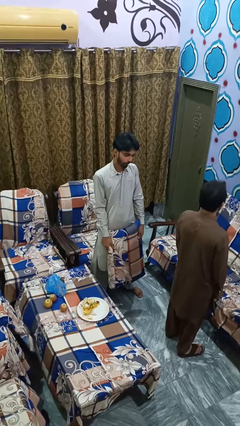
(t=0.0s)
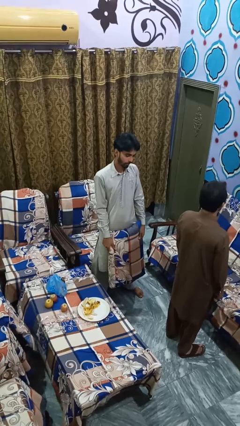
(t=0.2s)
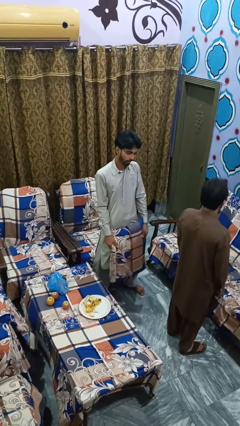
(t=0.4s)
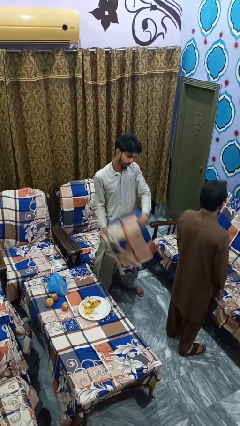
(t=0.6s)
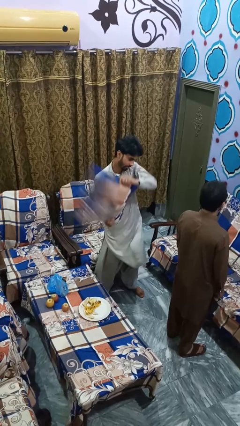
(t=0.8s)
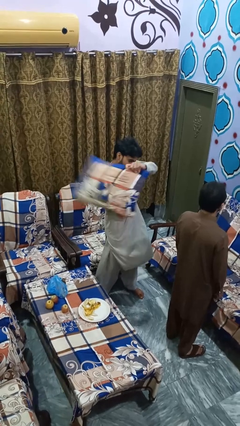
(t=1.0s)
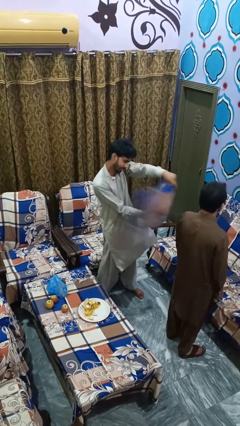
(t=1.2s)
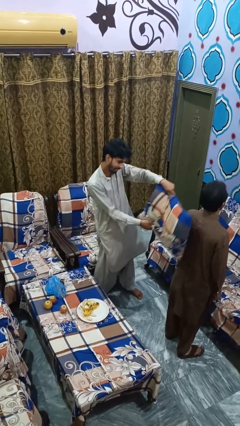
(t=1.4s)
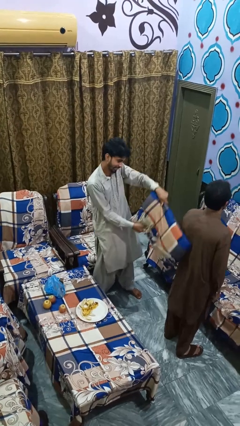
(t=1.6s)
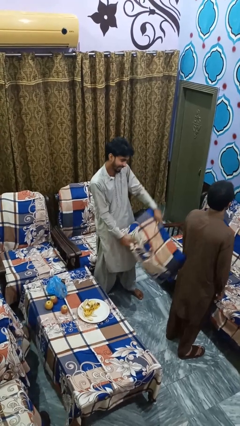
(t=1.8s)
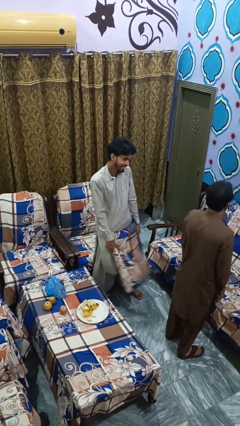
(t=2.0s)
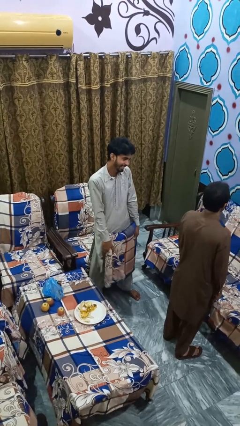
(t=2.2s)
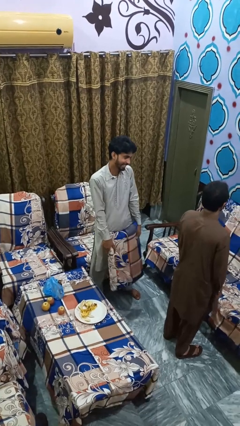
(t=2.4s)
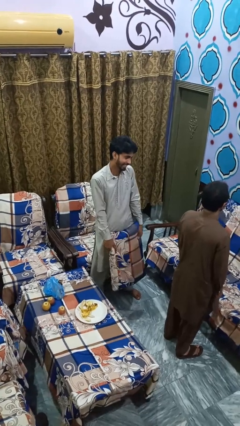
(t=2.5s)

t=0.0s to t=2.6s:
person hits person with pillow

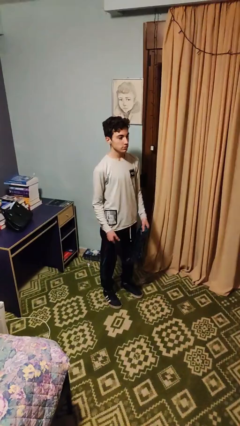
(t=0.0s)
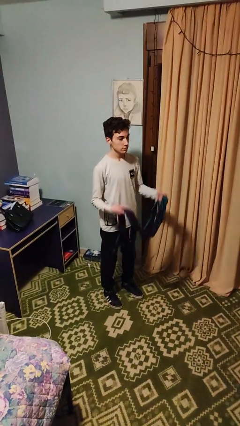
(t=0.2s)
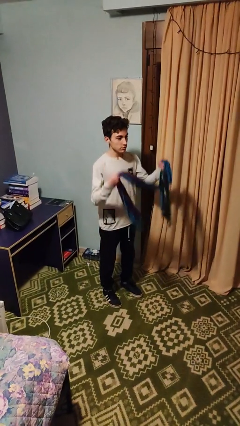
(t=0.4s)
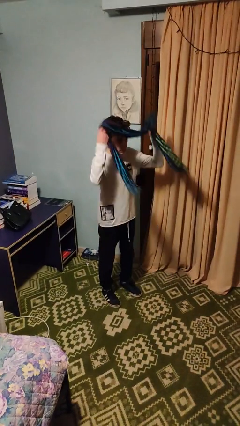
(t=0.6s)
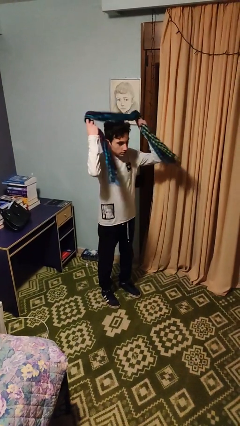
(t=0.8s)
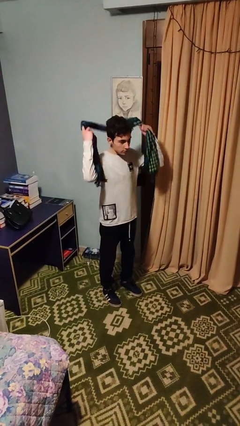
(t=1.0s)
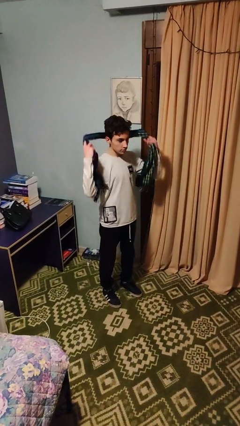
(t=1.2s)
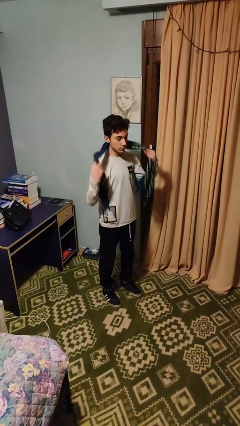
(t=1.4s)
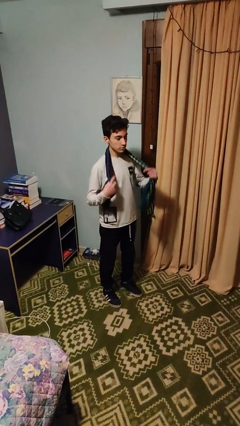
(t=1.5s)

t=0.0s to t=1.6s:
person puts on scarf

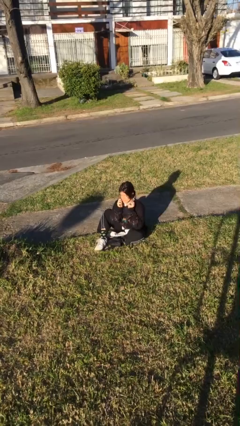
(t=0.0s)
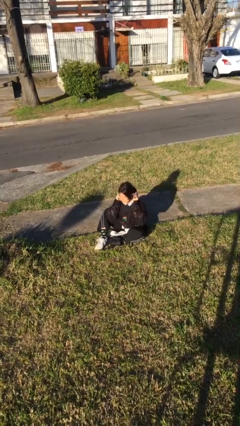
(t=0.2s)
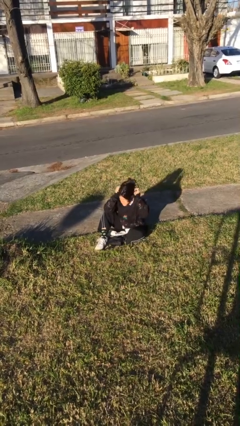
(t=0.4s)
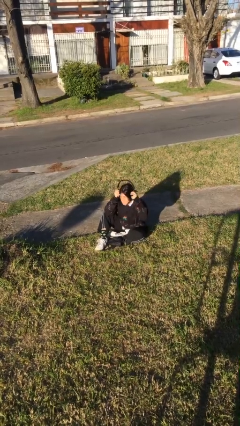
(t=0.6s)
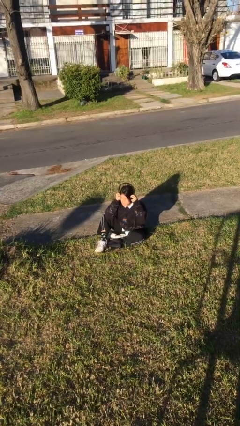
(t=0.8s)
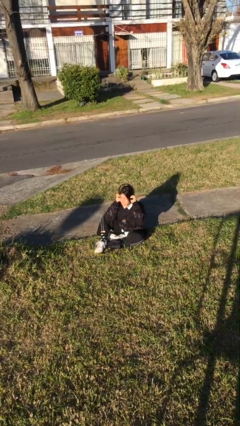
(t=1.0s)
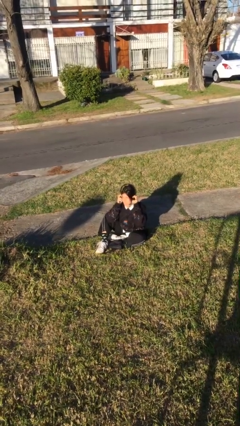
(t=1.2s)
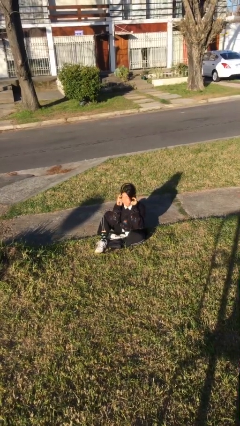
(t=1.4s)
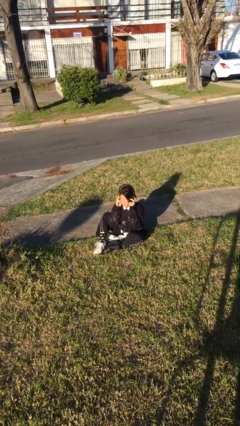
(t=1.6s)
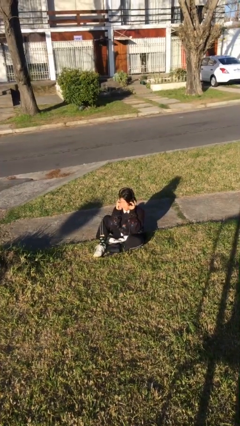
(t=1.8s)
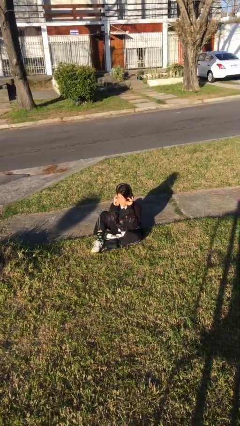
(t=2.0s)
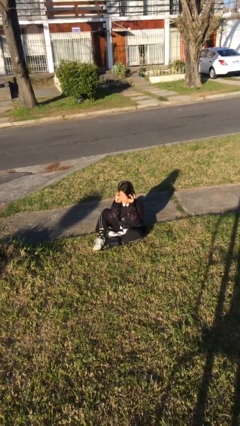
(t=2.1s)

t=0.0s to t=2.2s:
person puts on headphones

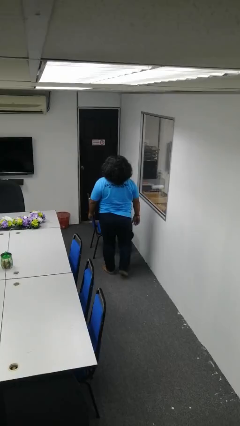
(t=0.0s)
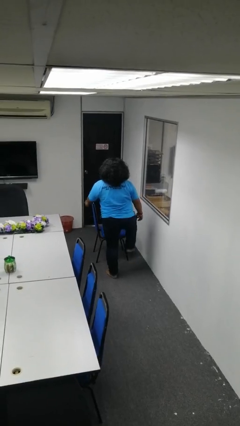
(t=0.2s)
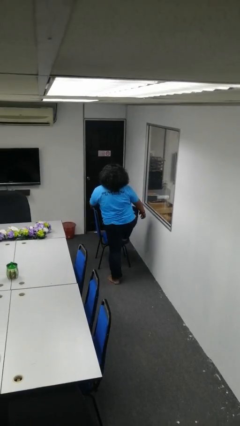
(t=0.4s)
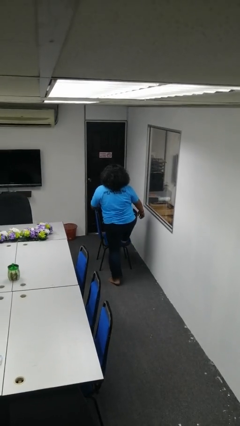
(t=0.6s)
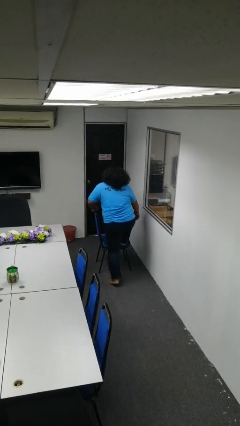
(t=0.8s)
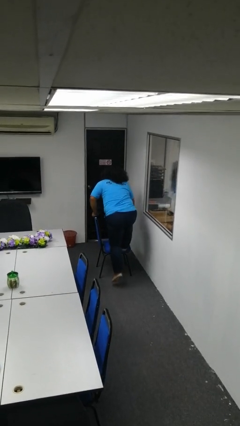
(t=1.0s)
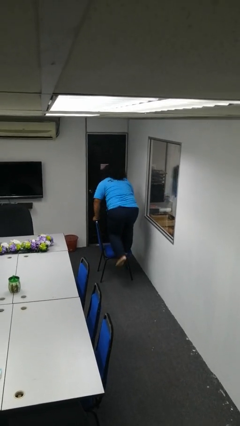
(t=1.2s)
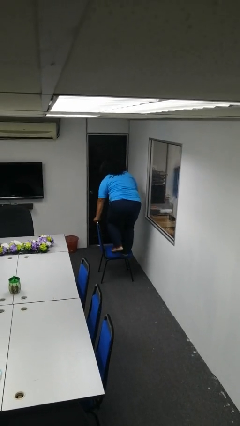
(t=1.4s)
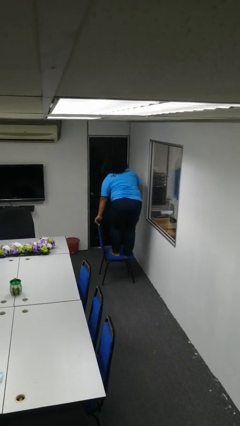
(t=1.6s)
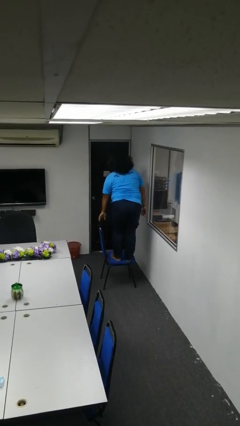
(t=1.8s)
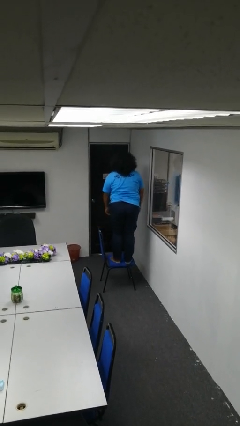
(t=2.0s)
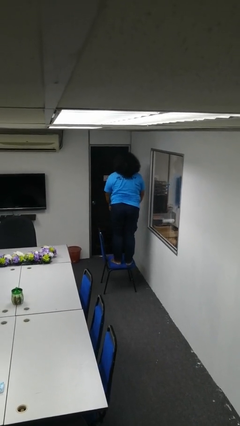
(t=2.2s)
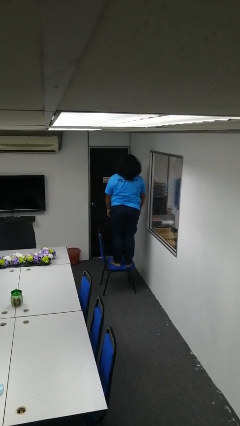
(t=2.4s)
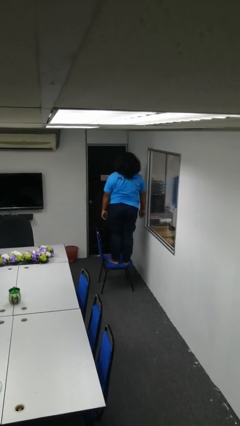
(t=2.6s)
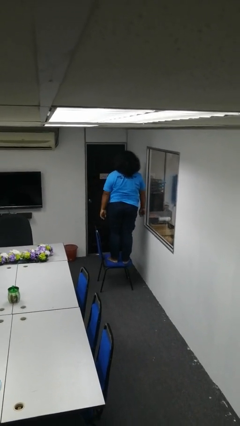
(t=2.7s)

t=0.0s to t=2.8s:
person climbs on chair

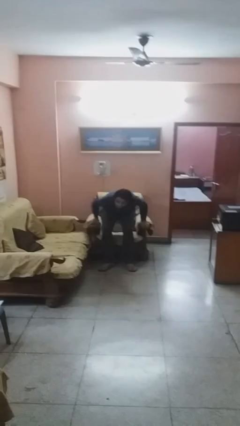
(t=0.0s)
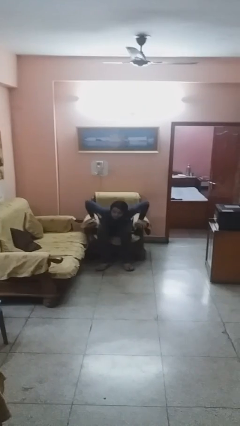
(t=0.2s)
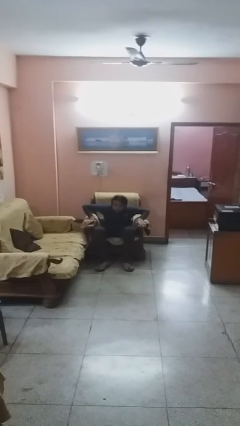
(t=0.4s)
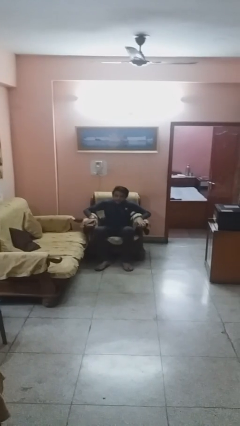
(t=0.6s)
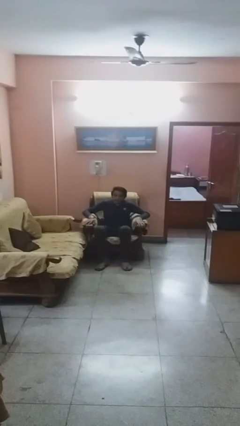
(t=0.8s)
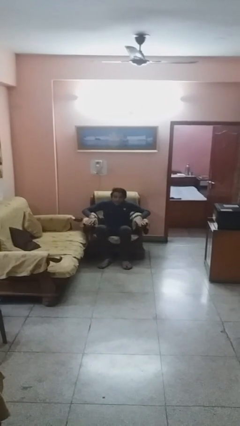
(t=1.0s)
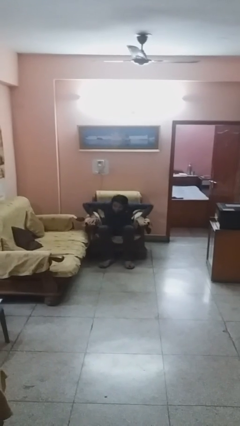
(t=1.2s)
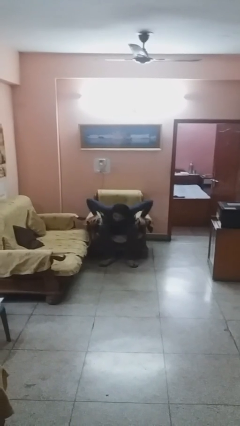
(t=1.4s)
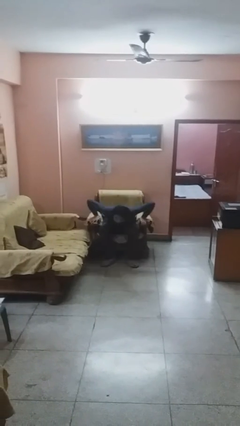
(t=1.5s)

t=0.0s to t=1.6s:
person sits down

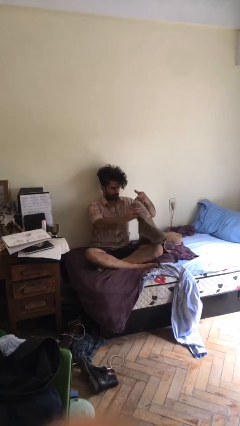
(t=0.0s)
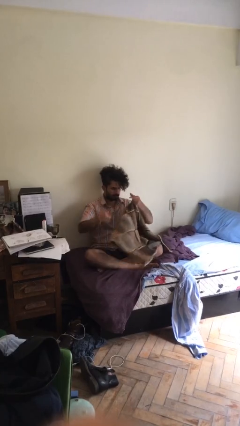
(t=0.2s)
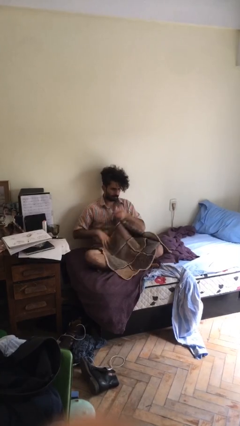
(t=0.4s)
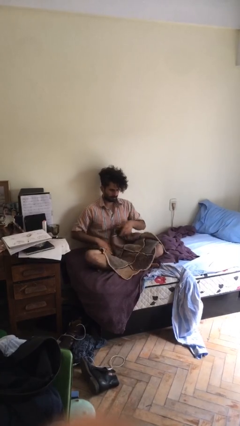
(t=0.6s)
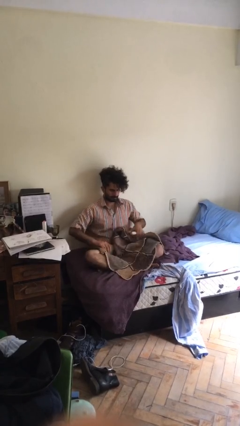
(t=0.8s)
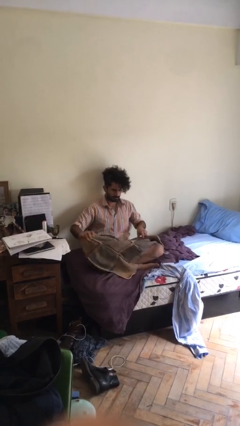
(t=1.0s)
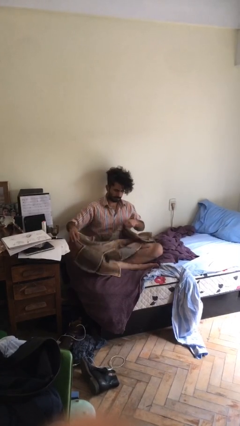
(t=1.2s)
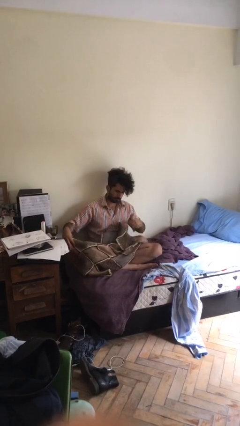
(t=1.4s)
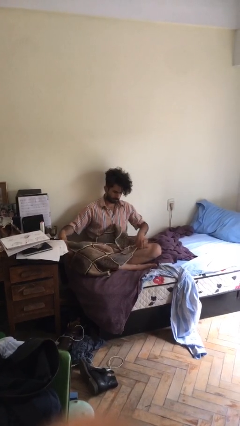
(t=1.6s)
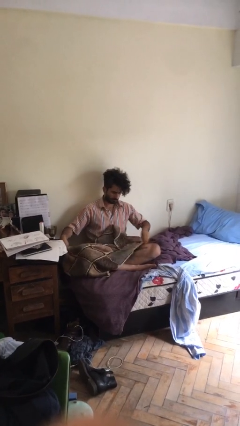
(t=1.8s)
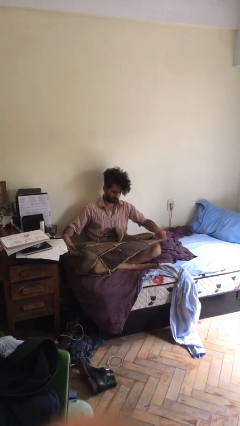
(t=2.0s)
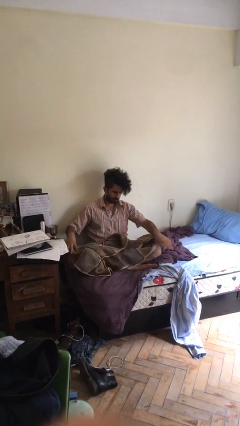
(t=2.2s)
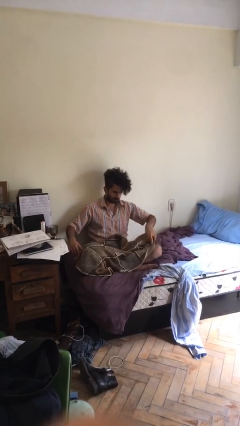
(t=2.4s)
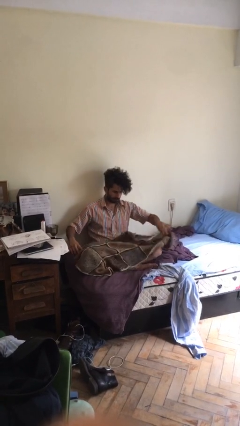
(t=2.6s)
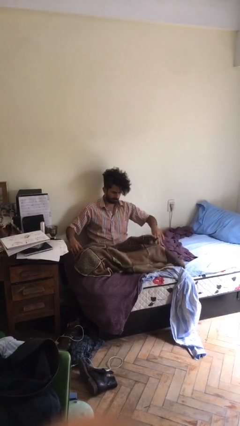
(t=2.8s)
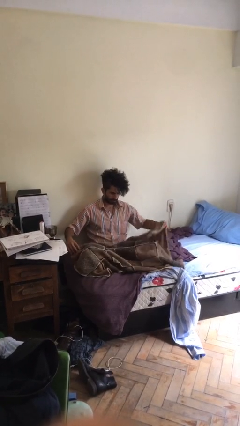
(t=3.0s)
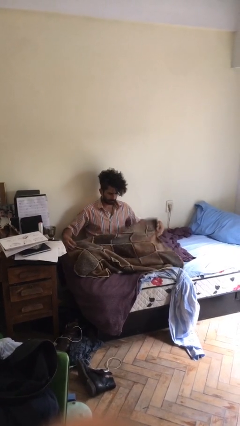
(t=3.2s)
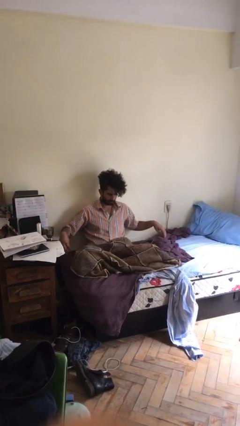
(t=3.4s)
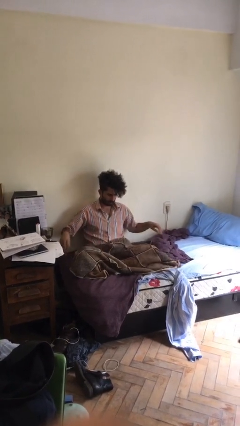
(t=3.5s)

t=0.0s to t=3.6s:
person covers with blanket

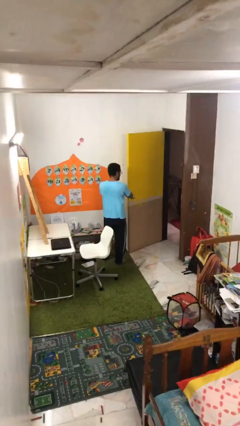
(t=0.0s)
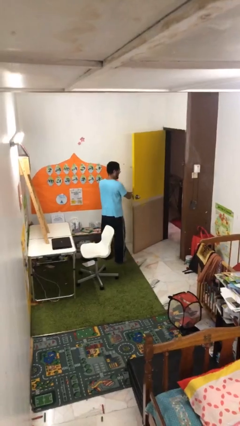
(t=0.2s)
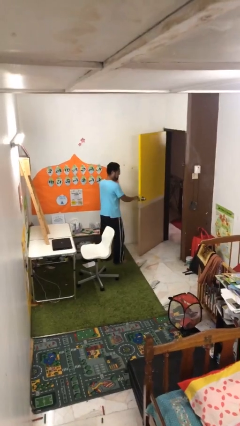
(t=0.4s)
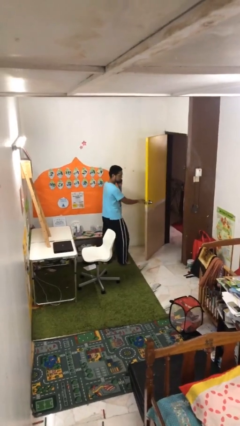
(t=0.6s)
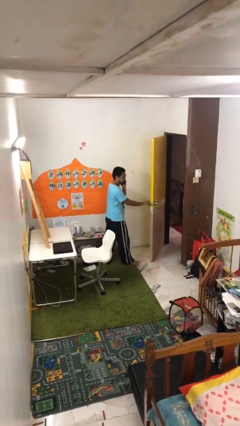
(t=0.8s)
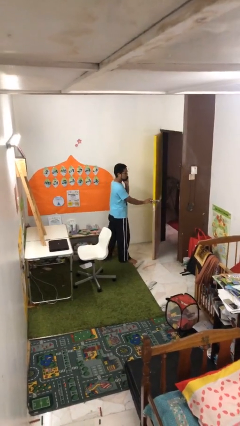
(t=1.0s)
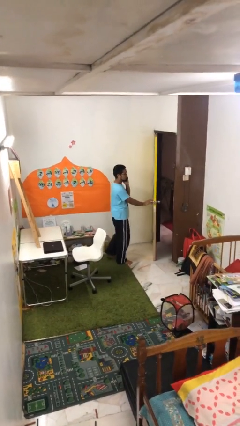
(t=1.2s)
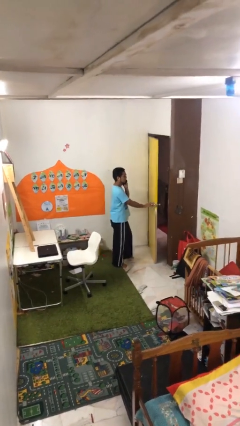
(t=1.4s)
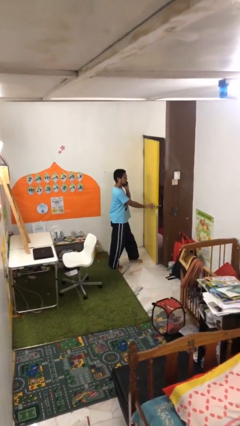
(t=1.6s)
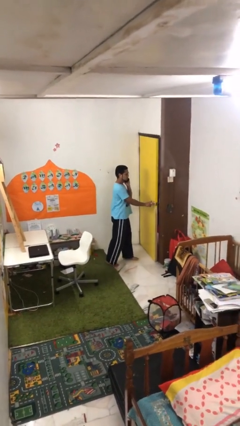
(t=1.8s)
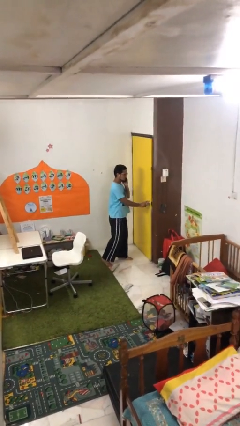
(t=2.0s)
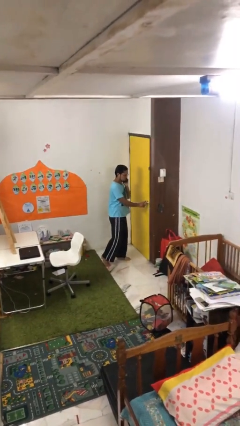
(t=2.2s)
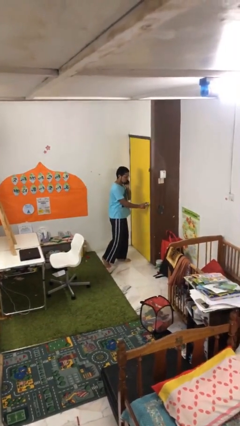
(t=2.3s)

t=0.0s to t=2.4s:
person closes facility door

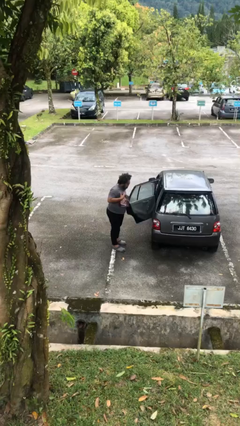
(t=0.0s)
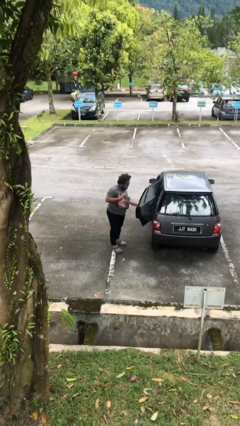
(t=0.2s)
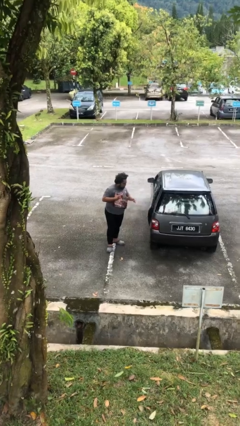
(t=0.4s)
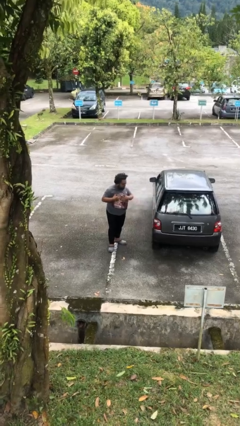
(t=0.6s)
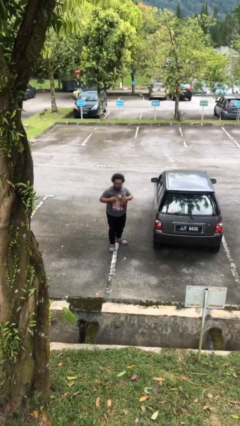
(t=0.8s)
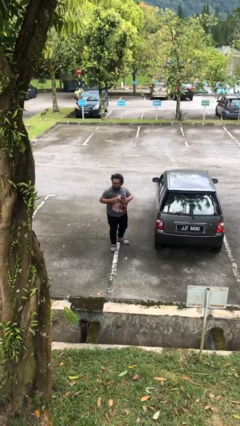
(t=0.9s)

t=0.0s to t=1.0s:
person closes car door
